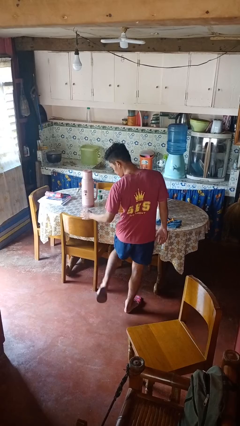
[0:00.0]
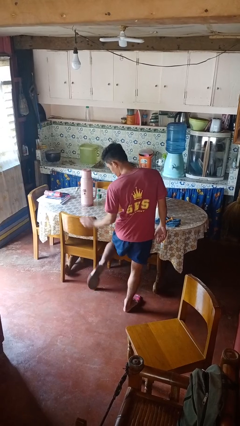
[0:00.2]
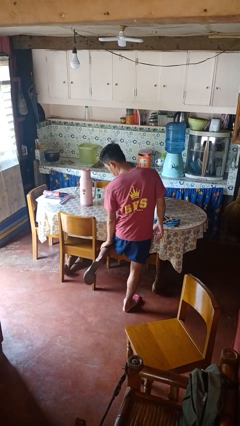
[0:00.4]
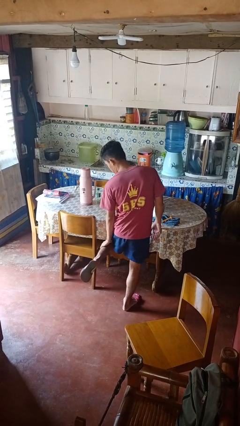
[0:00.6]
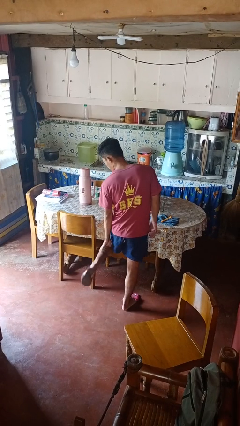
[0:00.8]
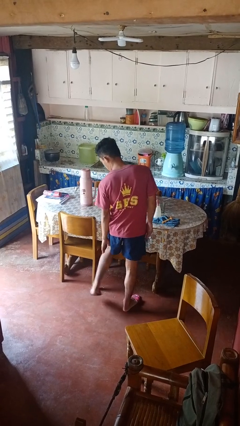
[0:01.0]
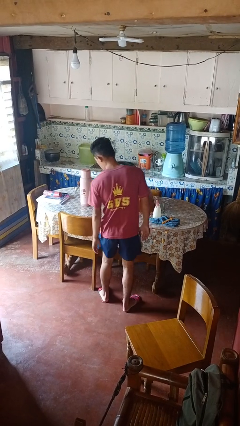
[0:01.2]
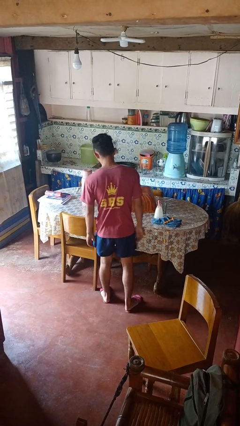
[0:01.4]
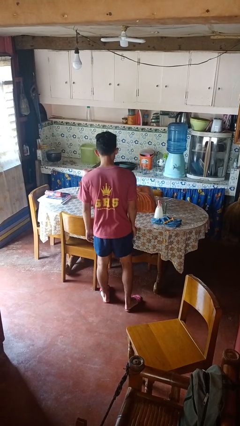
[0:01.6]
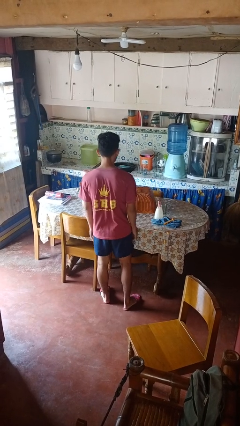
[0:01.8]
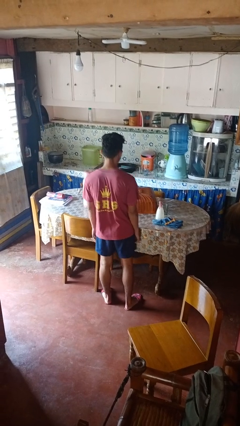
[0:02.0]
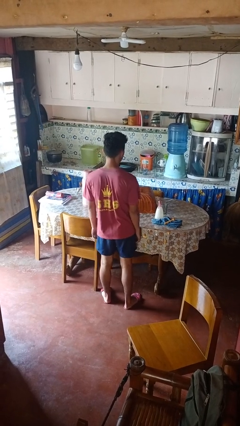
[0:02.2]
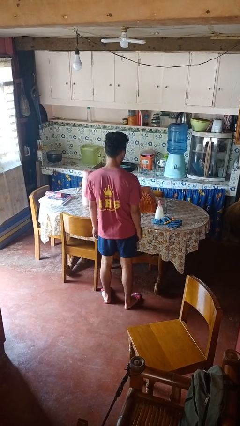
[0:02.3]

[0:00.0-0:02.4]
person swats bug

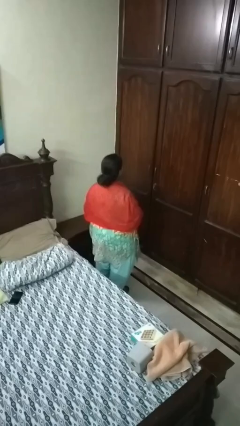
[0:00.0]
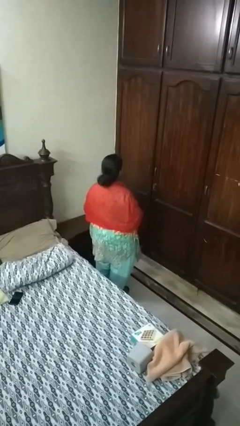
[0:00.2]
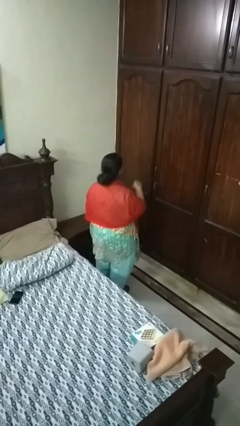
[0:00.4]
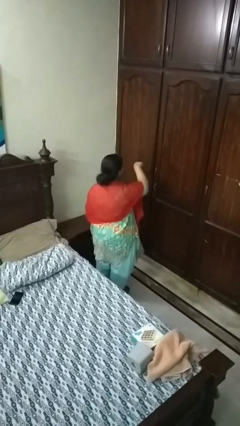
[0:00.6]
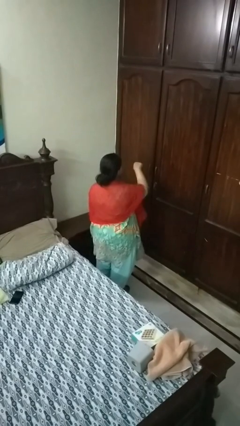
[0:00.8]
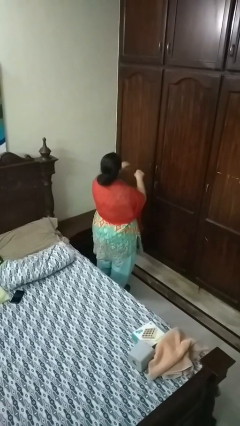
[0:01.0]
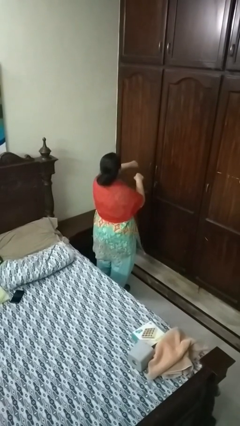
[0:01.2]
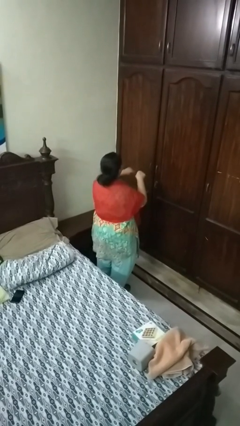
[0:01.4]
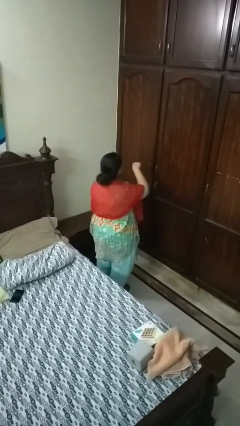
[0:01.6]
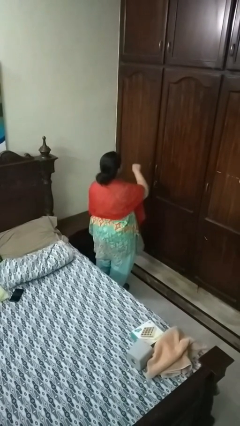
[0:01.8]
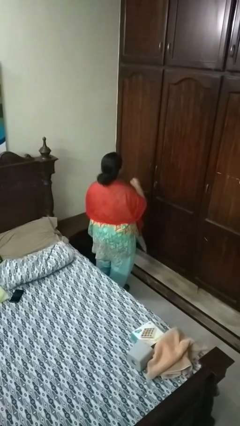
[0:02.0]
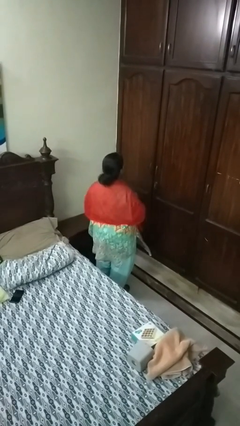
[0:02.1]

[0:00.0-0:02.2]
person punches

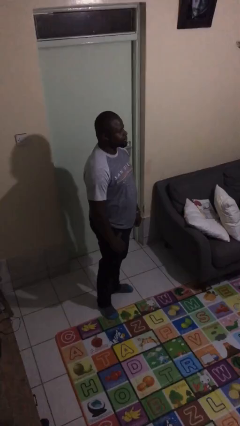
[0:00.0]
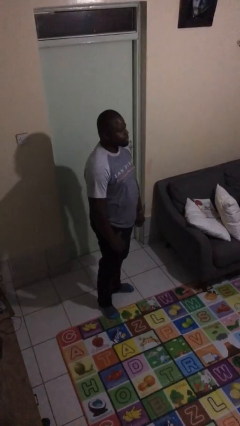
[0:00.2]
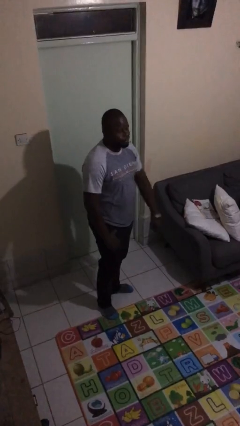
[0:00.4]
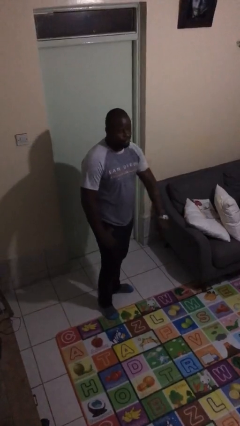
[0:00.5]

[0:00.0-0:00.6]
person looks at wristwatch

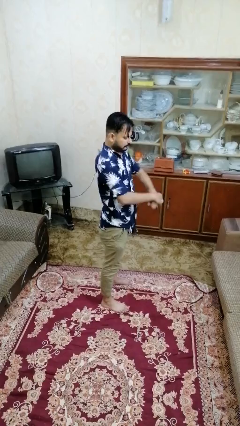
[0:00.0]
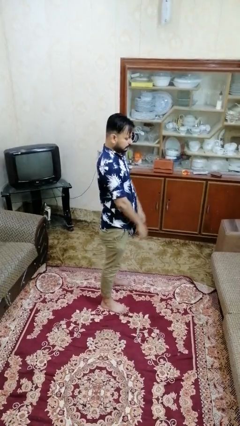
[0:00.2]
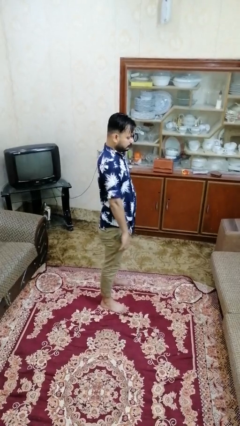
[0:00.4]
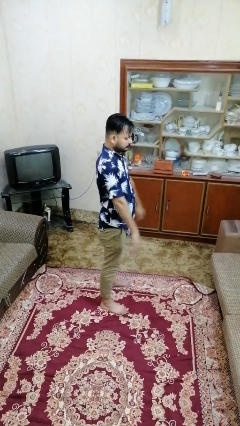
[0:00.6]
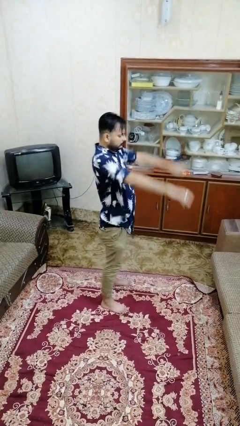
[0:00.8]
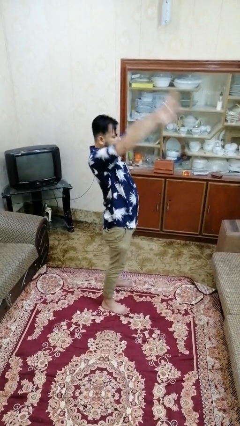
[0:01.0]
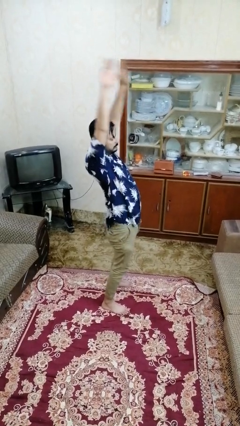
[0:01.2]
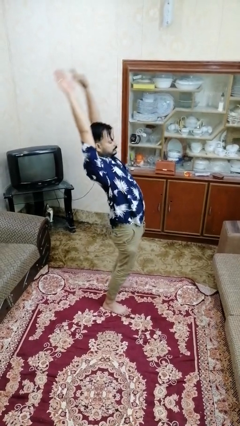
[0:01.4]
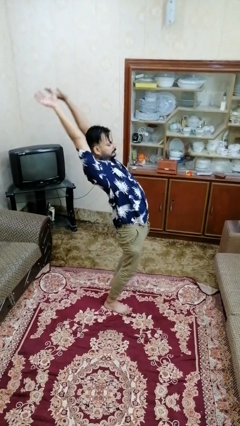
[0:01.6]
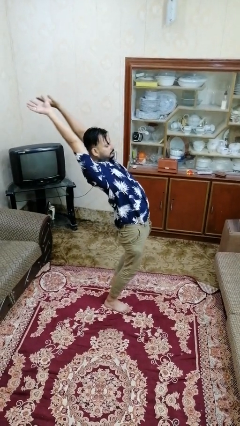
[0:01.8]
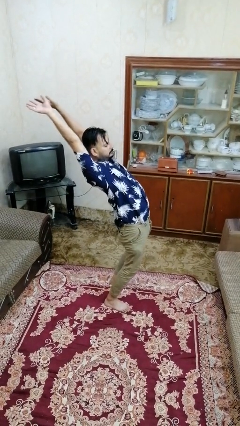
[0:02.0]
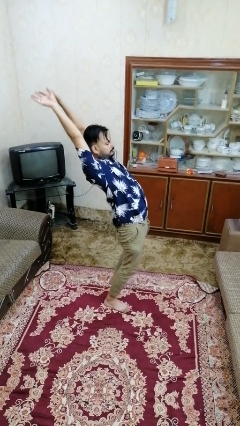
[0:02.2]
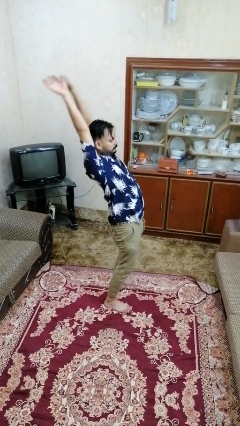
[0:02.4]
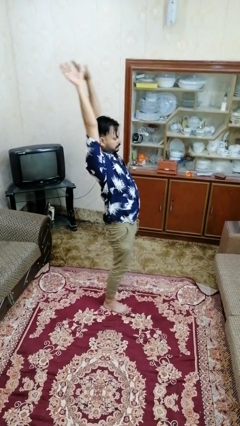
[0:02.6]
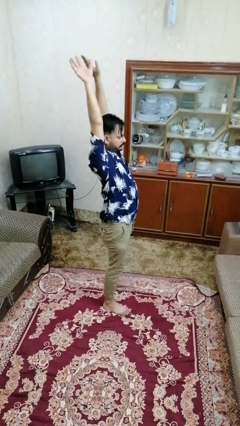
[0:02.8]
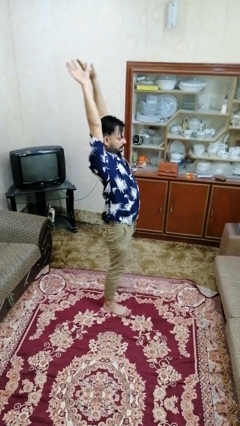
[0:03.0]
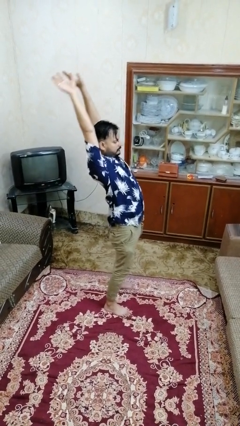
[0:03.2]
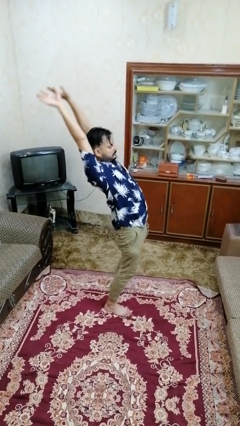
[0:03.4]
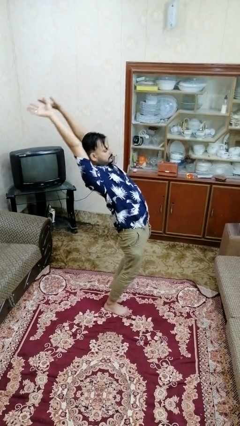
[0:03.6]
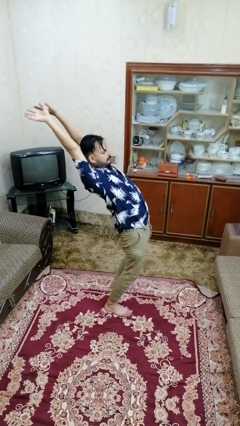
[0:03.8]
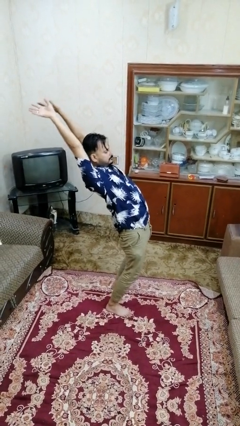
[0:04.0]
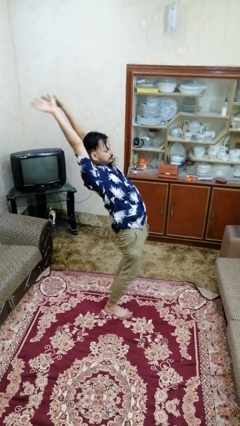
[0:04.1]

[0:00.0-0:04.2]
person stretches arms over head

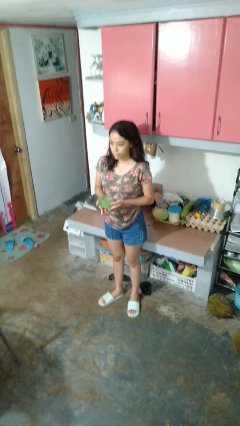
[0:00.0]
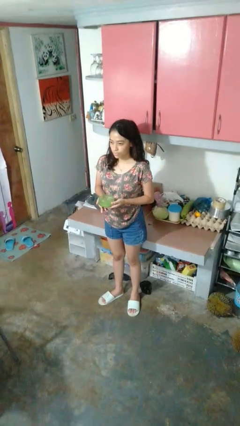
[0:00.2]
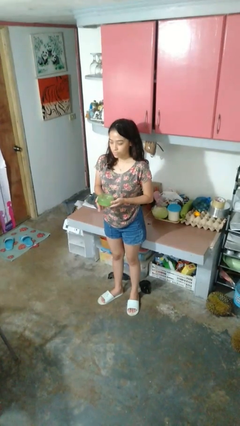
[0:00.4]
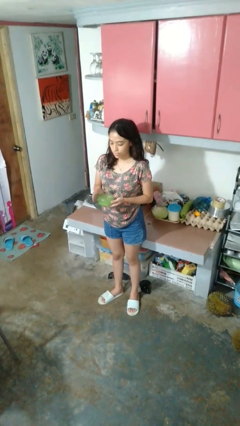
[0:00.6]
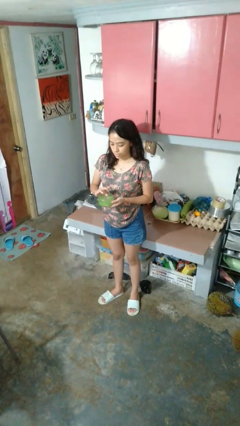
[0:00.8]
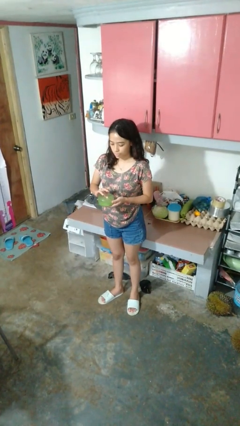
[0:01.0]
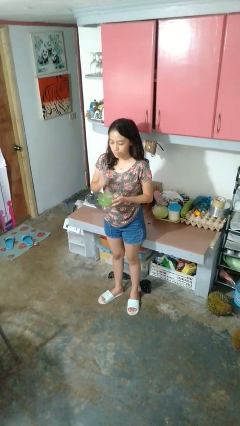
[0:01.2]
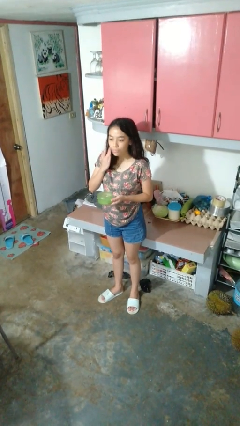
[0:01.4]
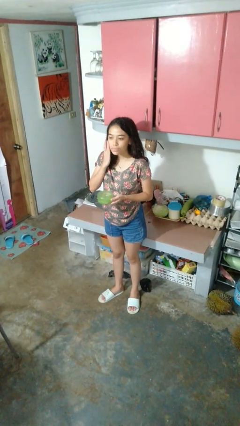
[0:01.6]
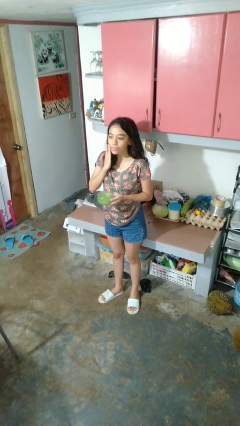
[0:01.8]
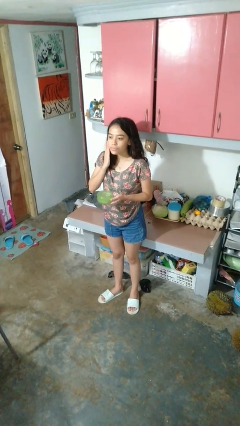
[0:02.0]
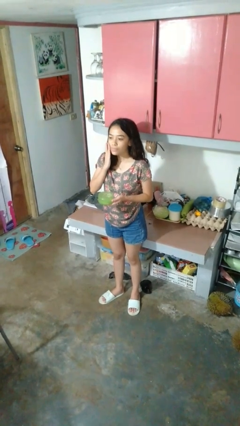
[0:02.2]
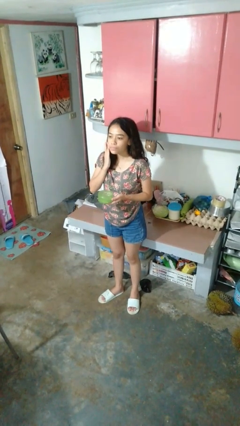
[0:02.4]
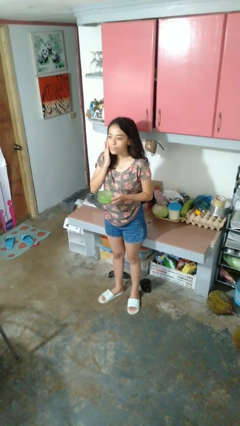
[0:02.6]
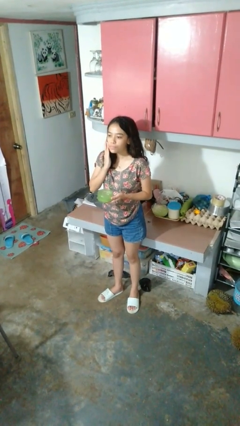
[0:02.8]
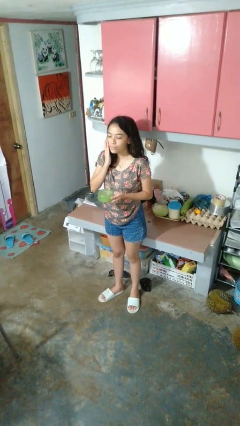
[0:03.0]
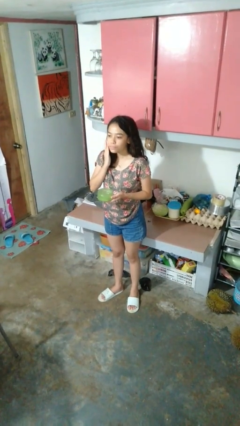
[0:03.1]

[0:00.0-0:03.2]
person applies facial moisturizer

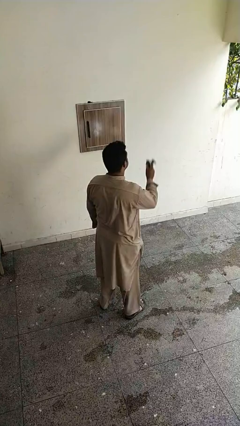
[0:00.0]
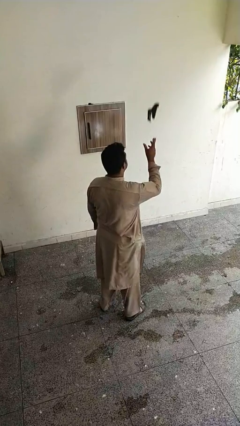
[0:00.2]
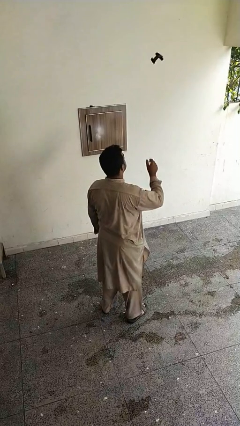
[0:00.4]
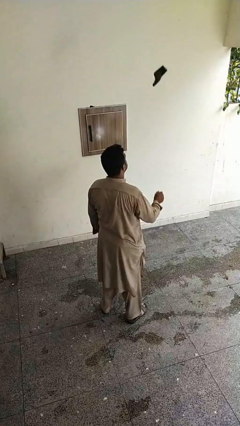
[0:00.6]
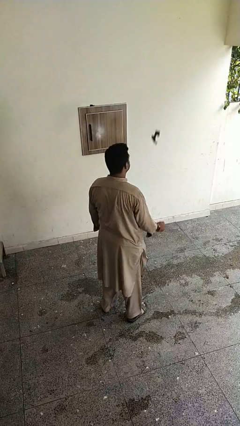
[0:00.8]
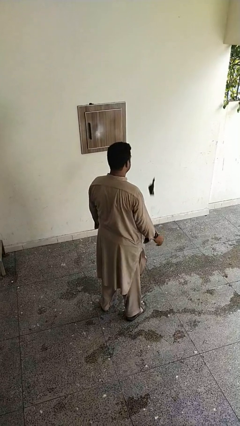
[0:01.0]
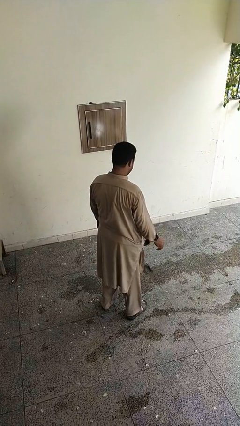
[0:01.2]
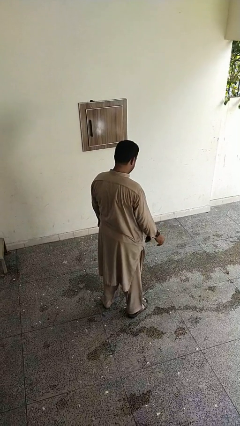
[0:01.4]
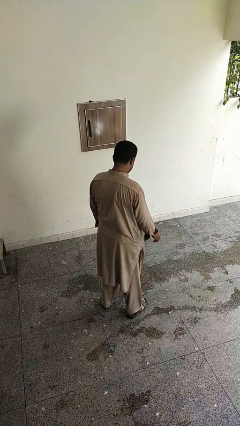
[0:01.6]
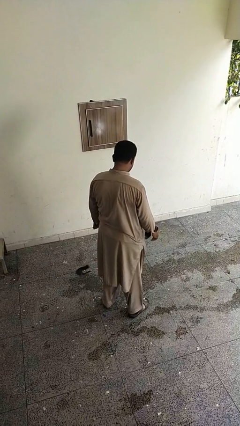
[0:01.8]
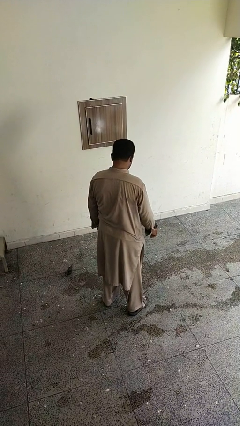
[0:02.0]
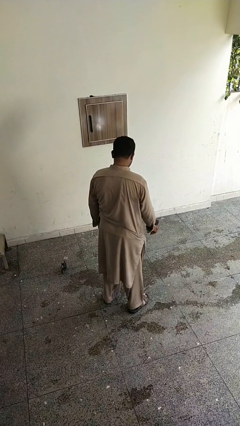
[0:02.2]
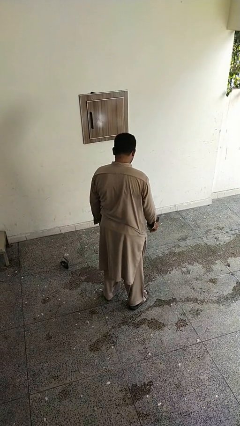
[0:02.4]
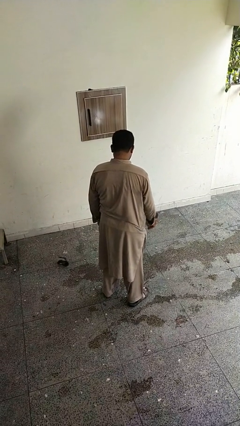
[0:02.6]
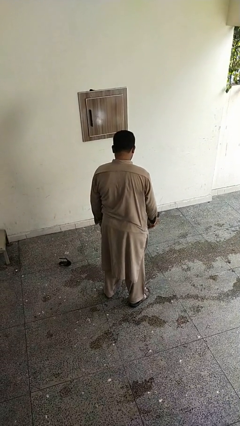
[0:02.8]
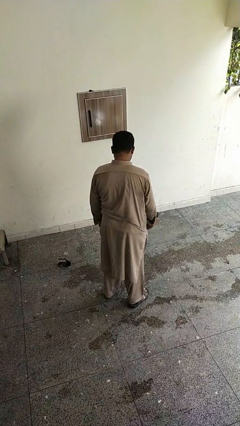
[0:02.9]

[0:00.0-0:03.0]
person throws object into air

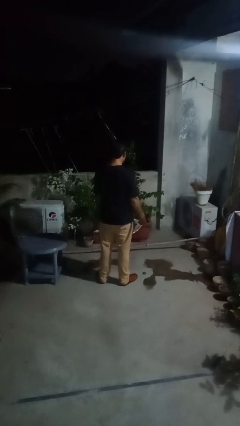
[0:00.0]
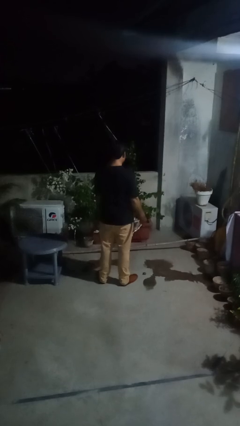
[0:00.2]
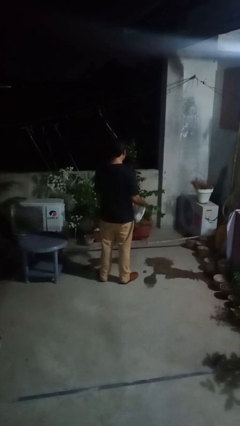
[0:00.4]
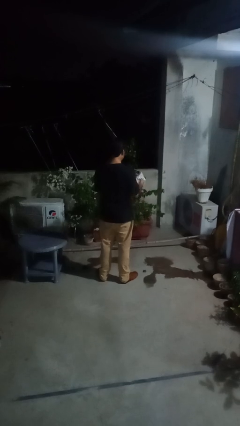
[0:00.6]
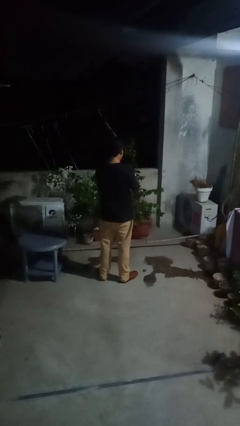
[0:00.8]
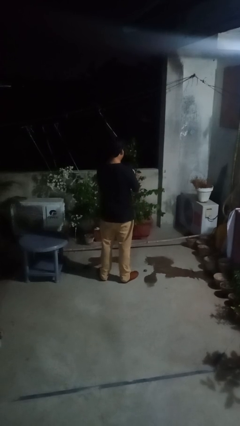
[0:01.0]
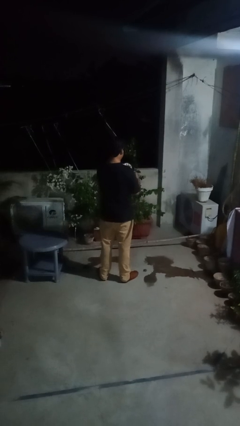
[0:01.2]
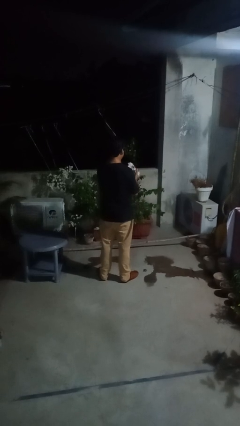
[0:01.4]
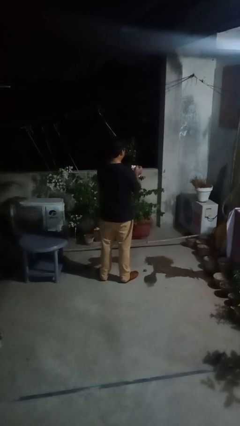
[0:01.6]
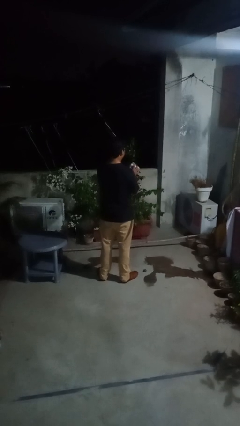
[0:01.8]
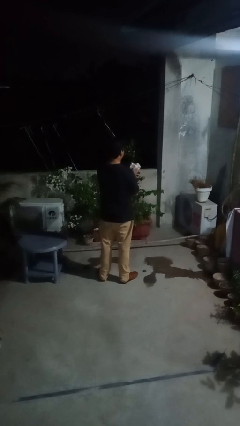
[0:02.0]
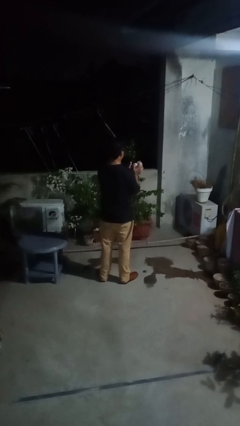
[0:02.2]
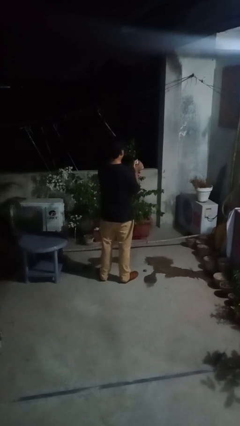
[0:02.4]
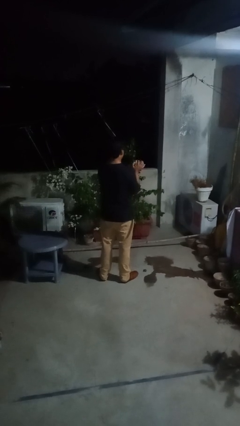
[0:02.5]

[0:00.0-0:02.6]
person crumples paper
